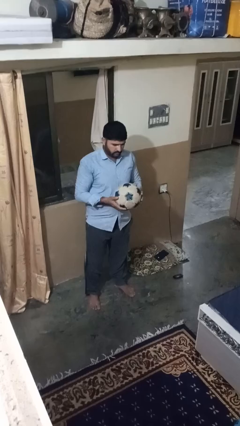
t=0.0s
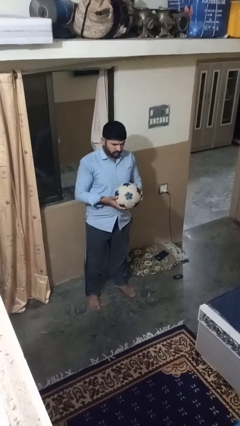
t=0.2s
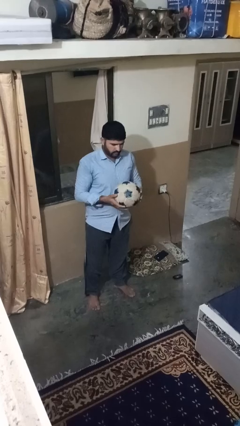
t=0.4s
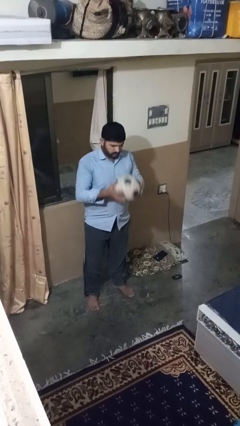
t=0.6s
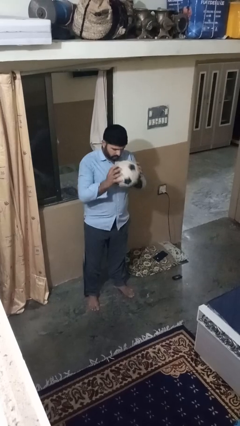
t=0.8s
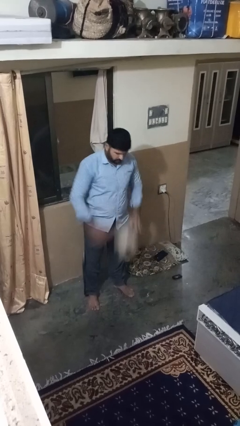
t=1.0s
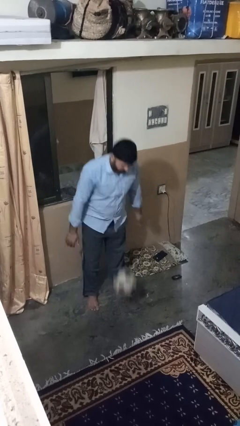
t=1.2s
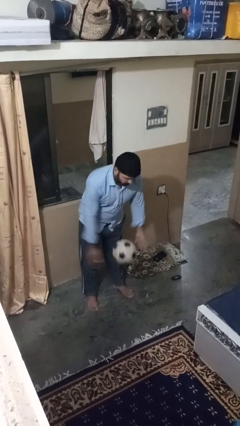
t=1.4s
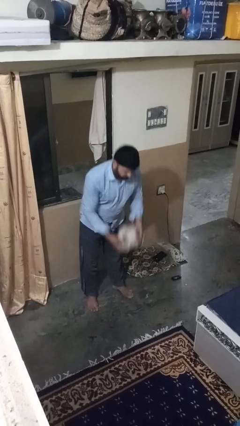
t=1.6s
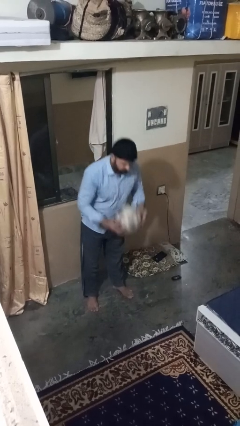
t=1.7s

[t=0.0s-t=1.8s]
person bounces ball on floor

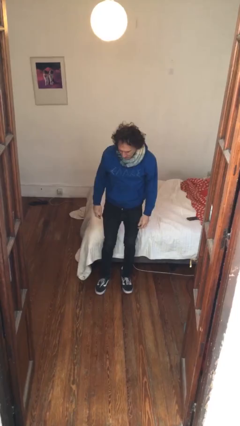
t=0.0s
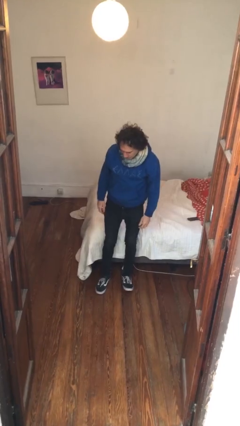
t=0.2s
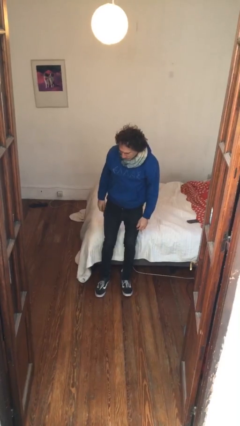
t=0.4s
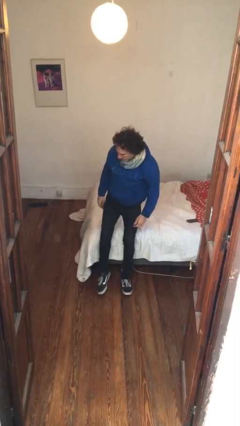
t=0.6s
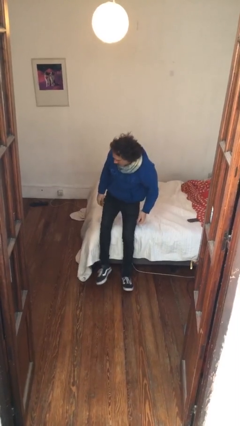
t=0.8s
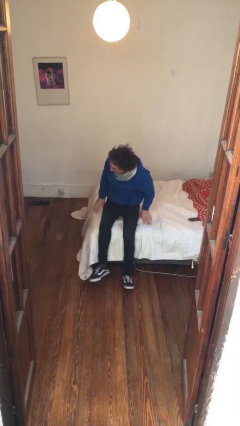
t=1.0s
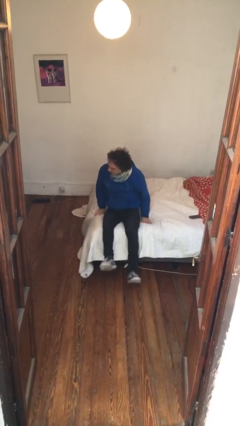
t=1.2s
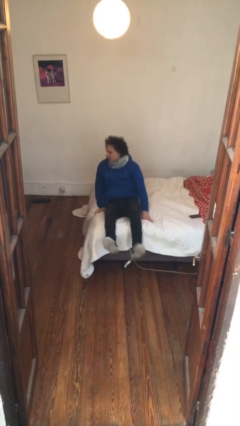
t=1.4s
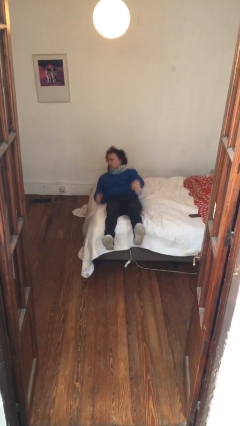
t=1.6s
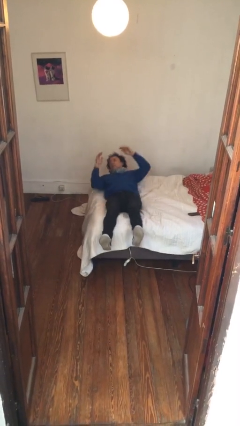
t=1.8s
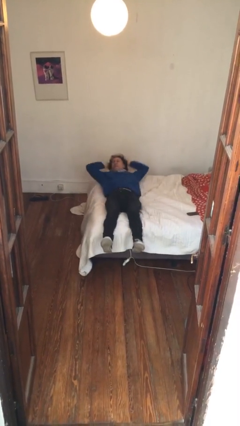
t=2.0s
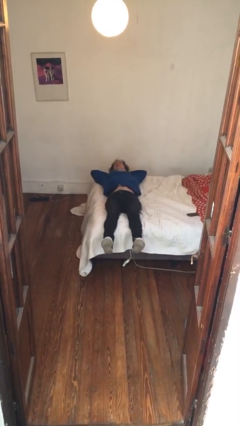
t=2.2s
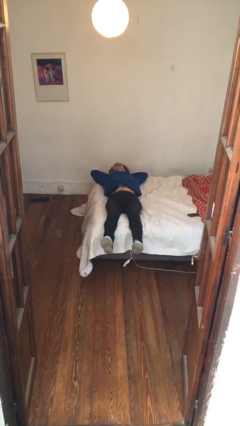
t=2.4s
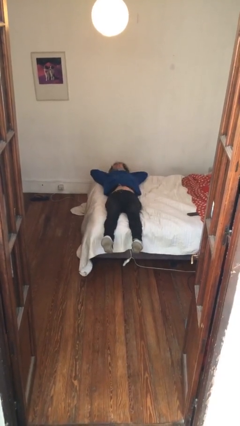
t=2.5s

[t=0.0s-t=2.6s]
person lies down on bed

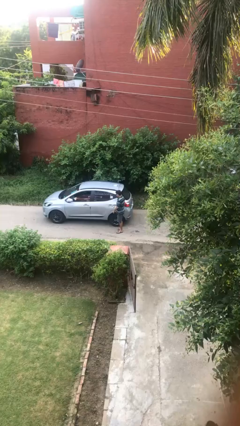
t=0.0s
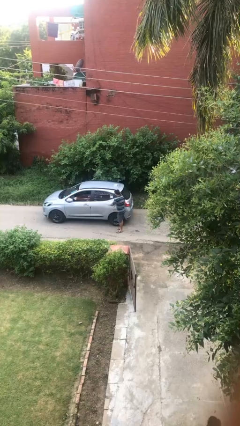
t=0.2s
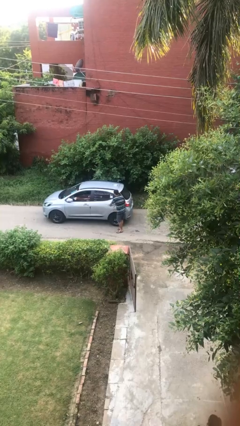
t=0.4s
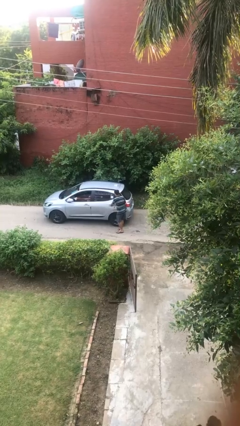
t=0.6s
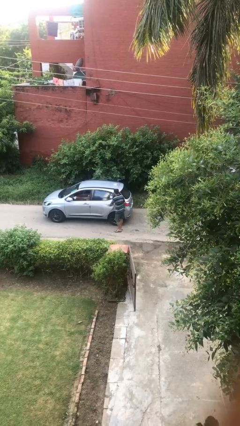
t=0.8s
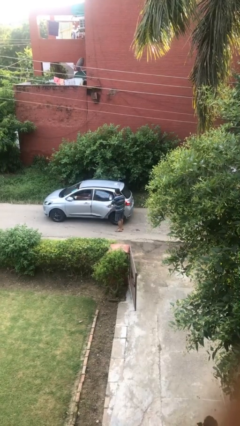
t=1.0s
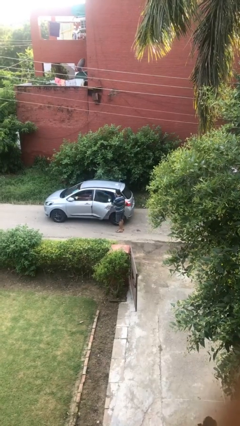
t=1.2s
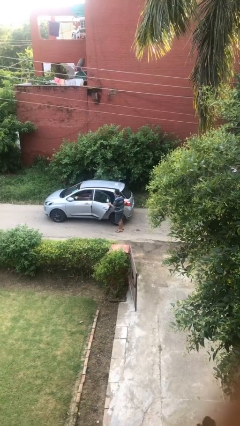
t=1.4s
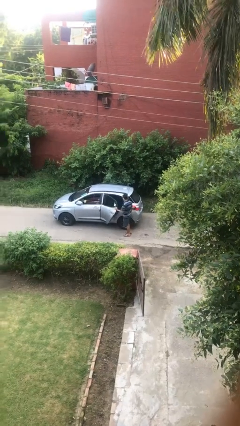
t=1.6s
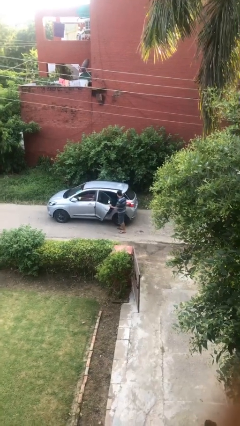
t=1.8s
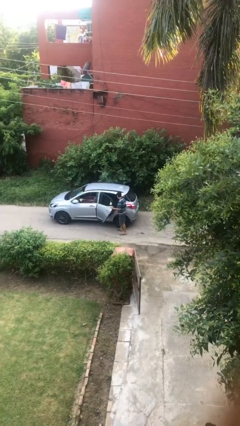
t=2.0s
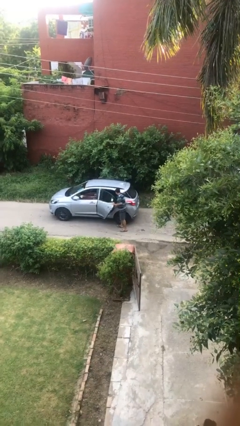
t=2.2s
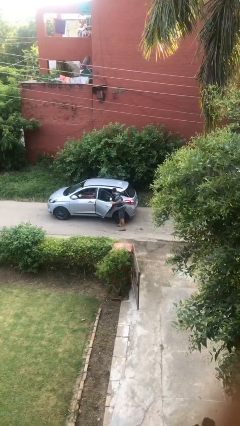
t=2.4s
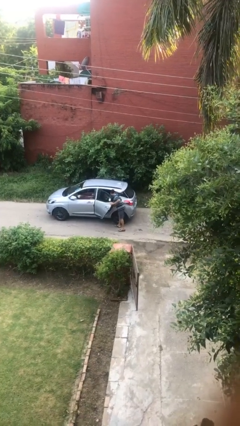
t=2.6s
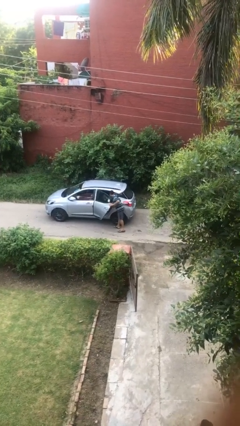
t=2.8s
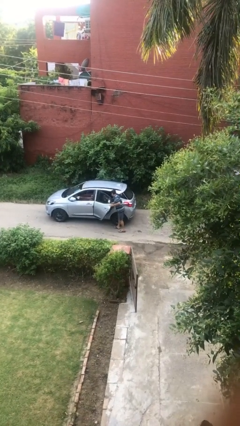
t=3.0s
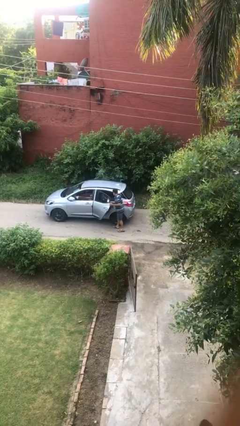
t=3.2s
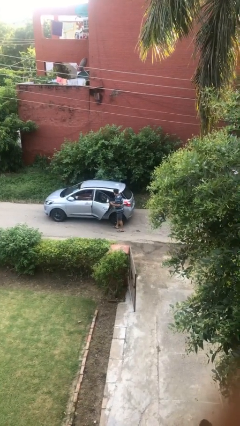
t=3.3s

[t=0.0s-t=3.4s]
person opens car door

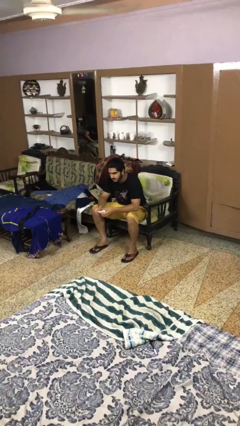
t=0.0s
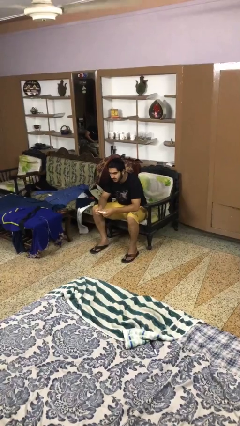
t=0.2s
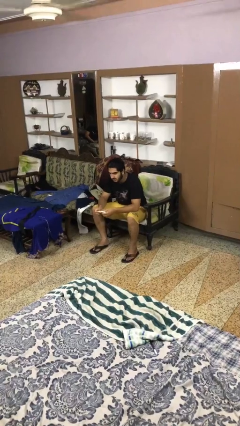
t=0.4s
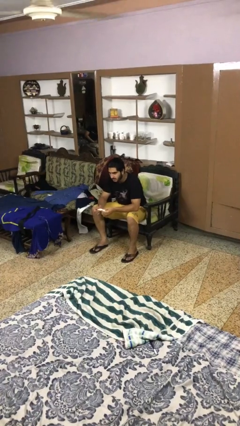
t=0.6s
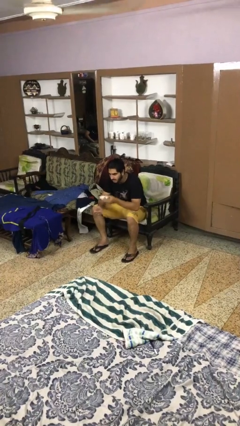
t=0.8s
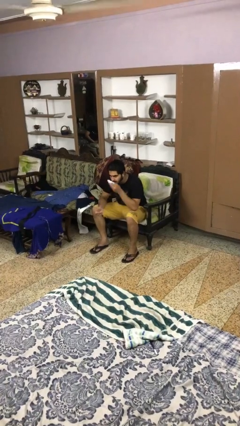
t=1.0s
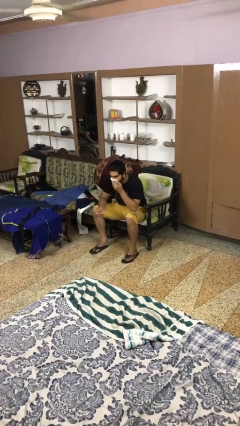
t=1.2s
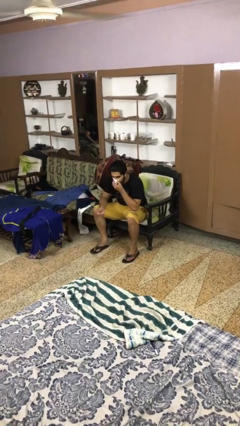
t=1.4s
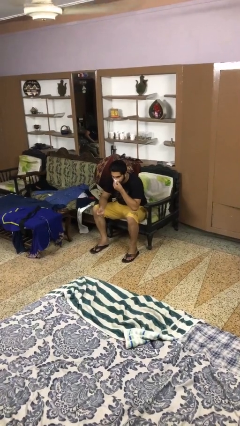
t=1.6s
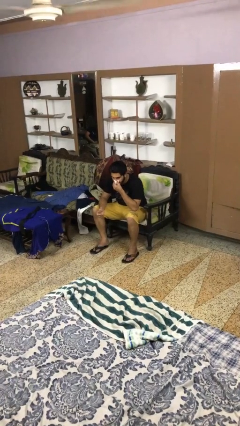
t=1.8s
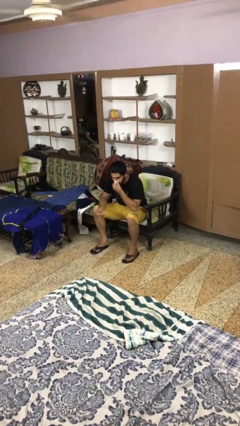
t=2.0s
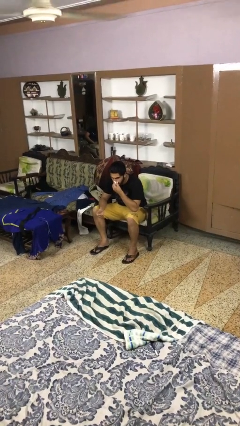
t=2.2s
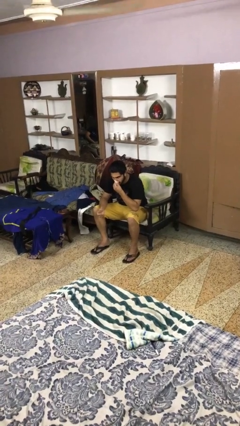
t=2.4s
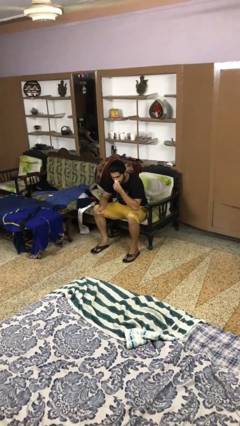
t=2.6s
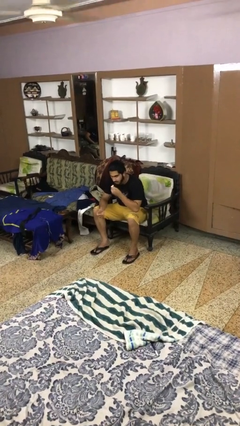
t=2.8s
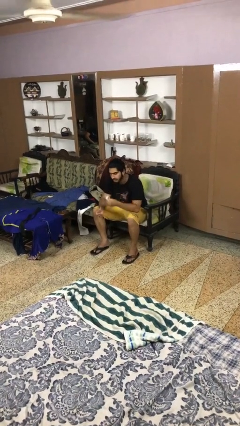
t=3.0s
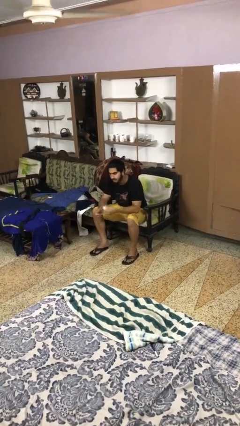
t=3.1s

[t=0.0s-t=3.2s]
person blows nose

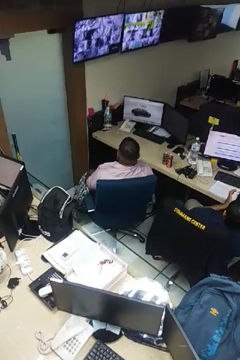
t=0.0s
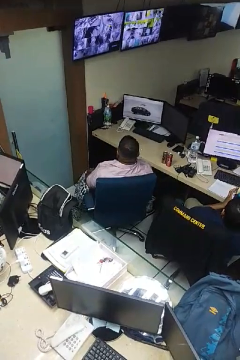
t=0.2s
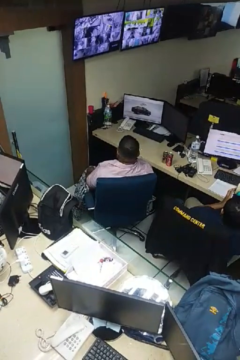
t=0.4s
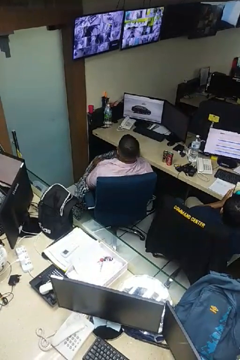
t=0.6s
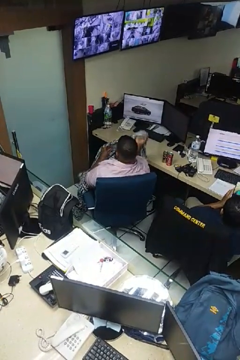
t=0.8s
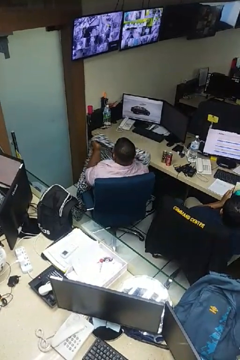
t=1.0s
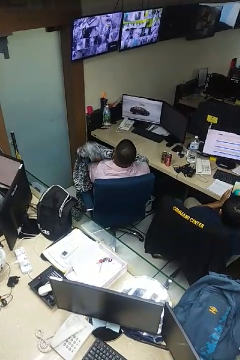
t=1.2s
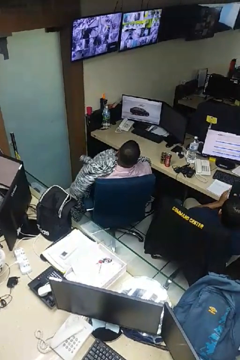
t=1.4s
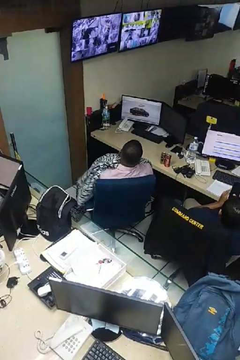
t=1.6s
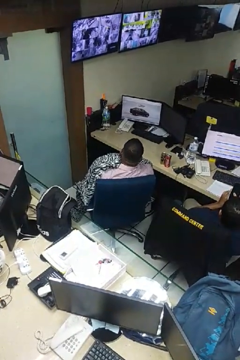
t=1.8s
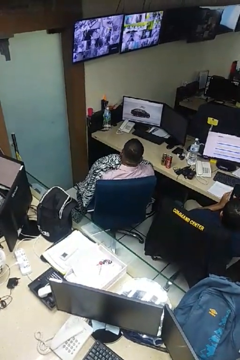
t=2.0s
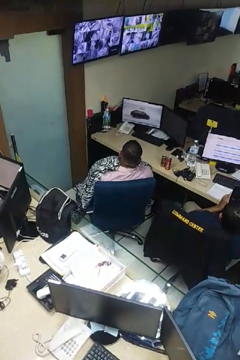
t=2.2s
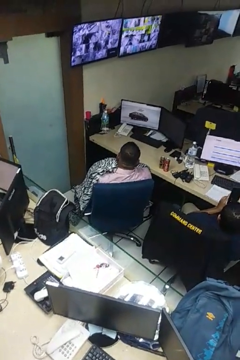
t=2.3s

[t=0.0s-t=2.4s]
person covers with blanket

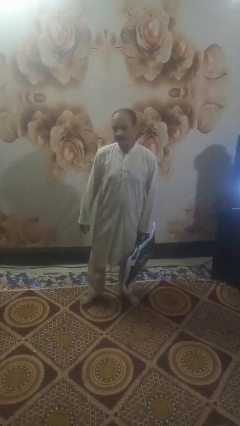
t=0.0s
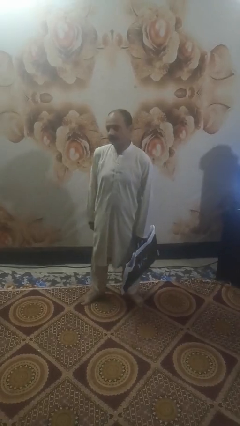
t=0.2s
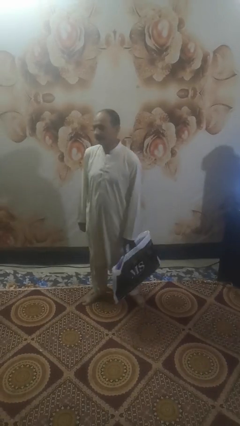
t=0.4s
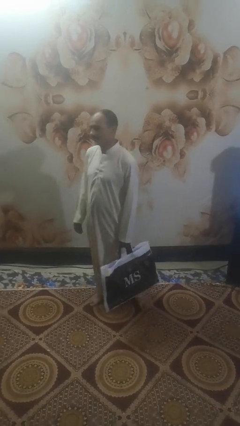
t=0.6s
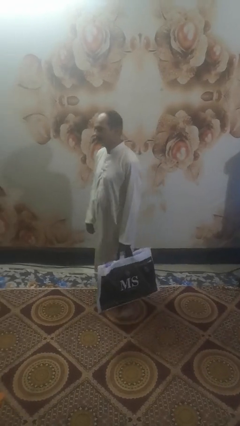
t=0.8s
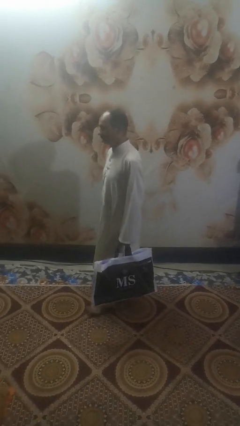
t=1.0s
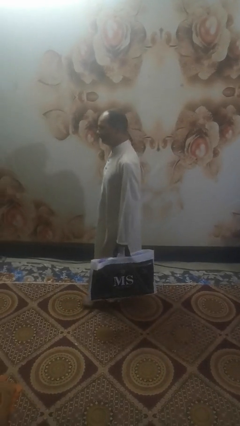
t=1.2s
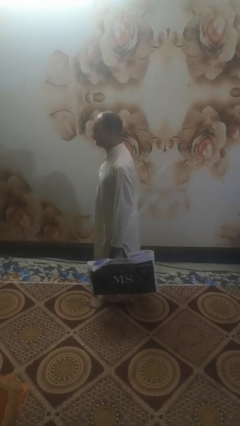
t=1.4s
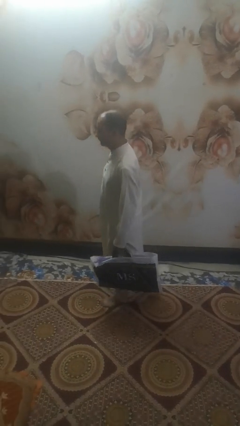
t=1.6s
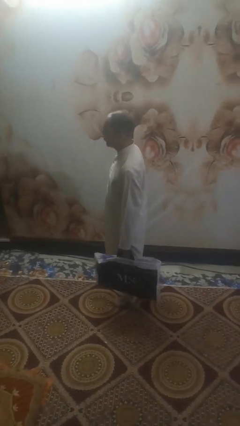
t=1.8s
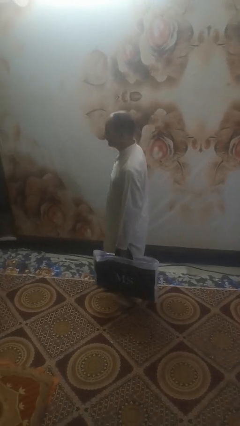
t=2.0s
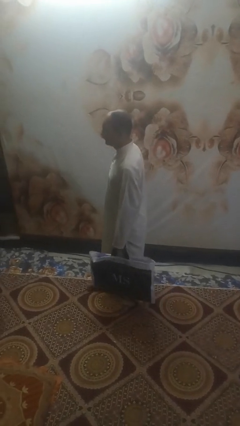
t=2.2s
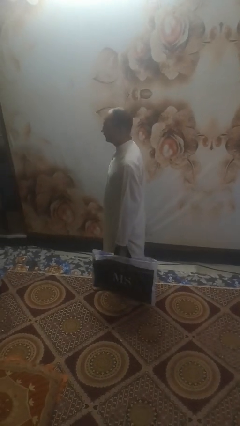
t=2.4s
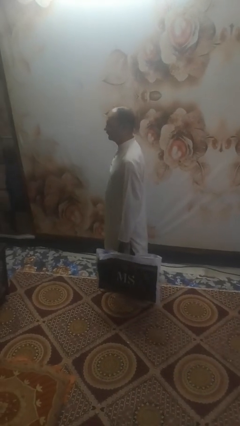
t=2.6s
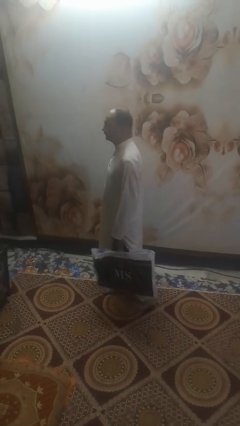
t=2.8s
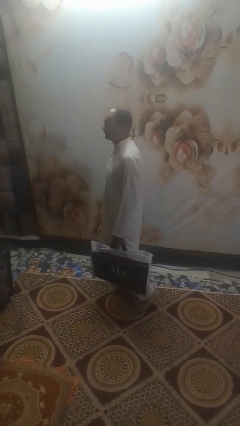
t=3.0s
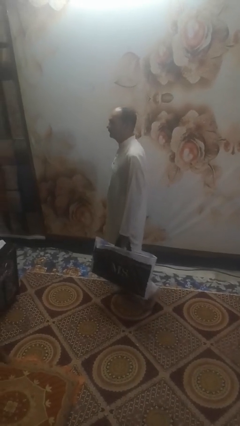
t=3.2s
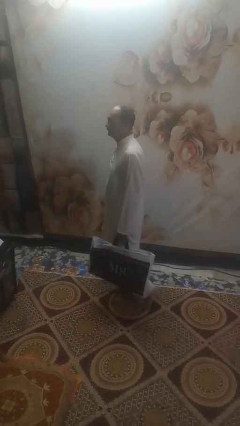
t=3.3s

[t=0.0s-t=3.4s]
person carries groceries

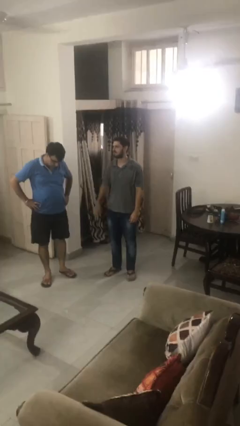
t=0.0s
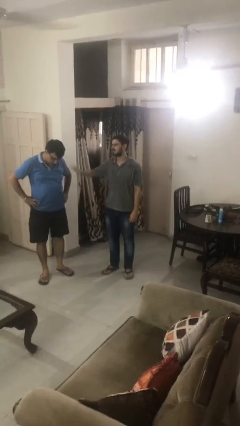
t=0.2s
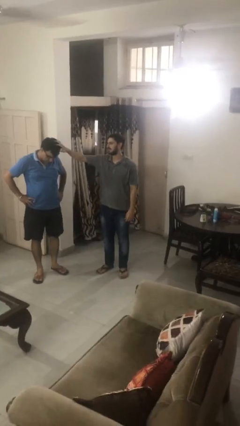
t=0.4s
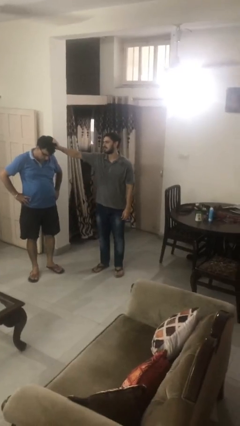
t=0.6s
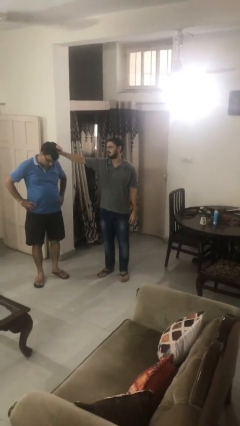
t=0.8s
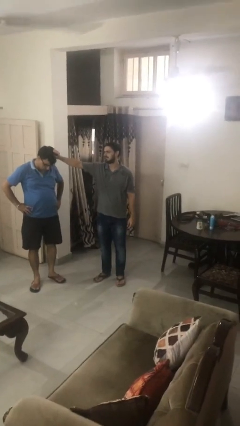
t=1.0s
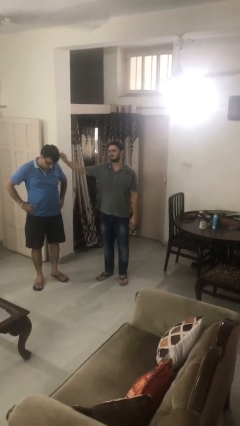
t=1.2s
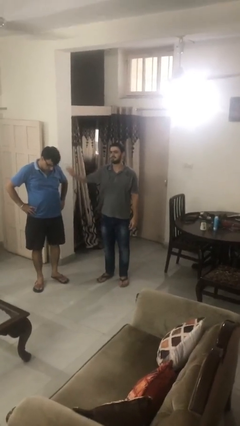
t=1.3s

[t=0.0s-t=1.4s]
person grabs person by hair
